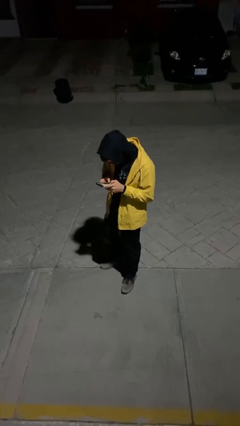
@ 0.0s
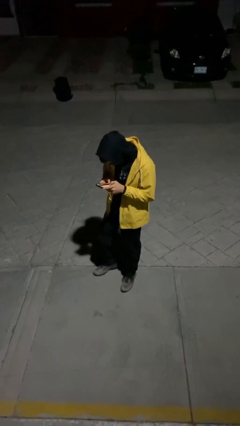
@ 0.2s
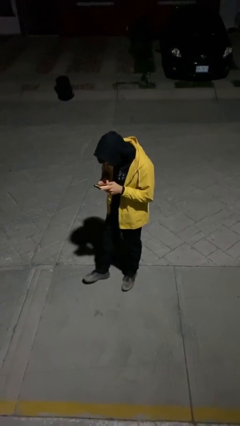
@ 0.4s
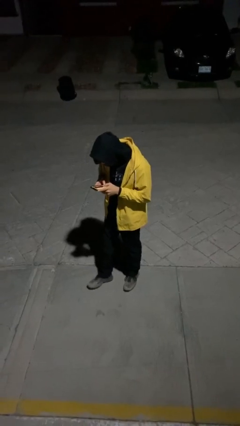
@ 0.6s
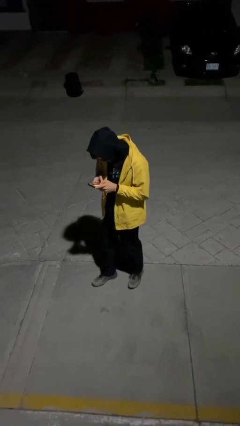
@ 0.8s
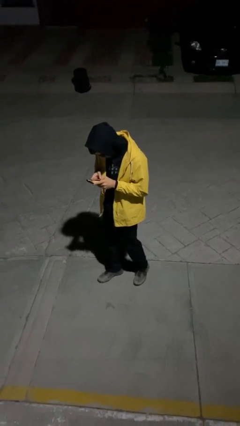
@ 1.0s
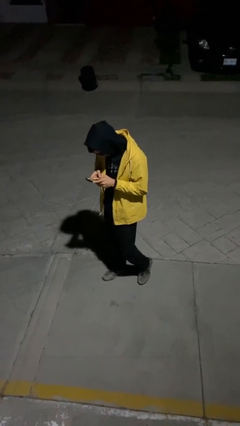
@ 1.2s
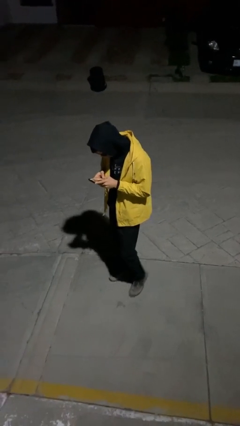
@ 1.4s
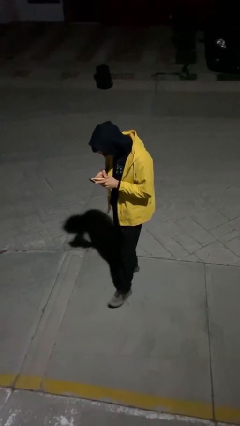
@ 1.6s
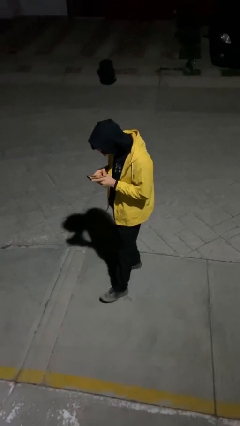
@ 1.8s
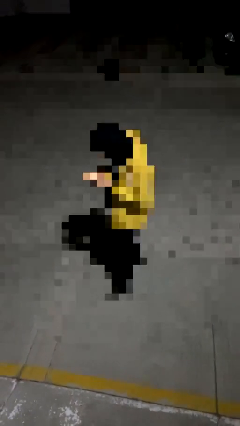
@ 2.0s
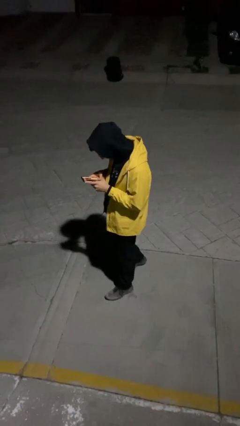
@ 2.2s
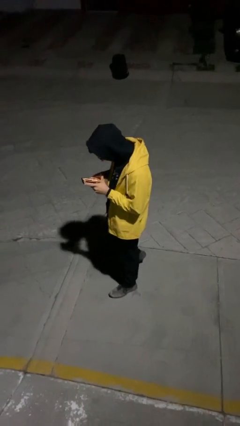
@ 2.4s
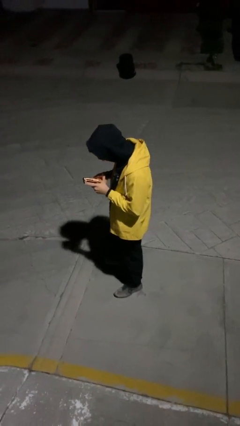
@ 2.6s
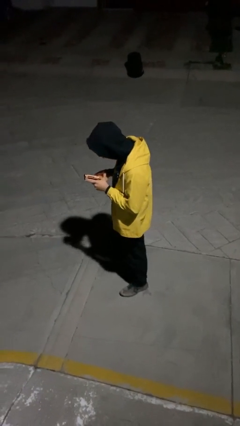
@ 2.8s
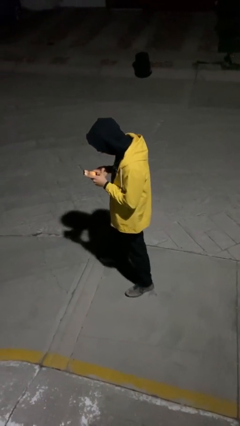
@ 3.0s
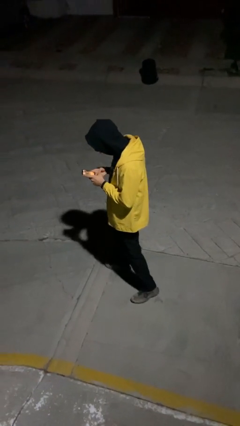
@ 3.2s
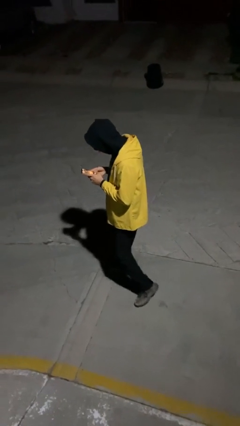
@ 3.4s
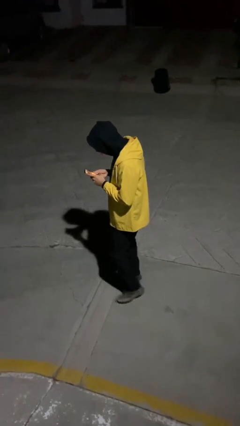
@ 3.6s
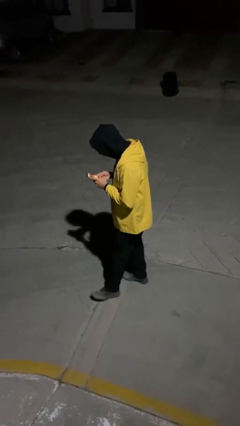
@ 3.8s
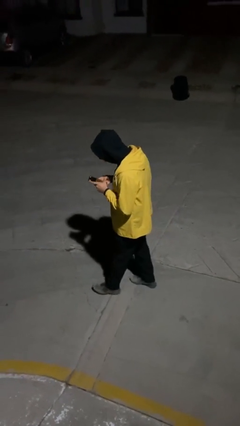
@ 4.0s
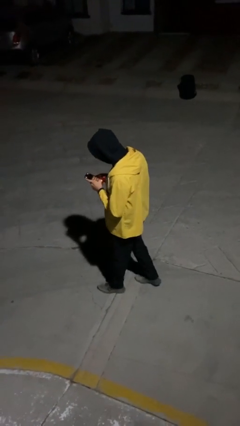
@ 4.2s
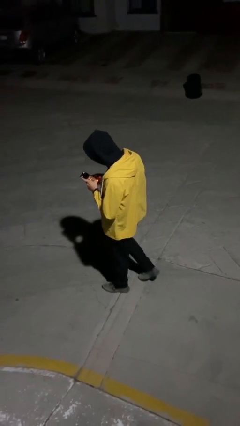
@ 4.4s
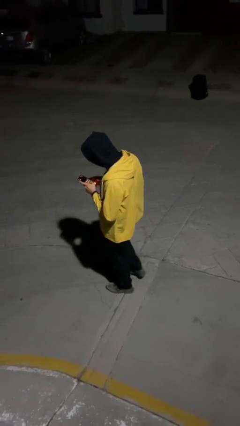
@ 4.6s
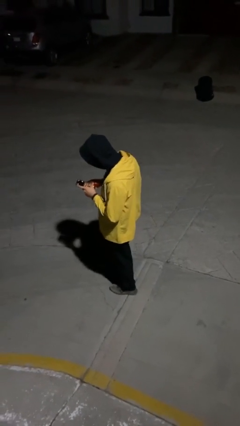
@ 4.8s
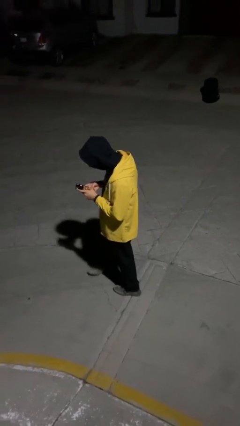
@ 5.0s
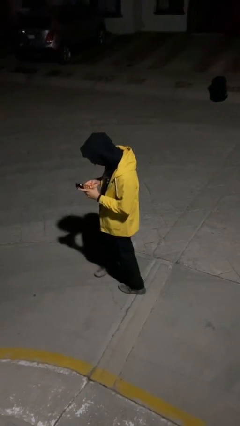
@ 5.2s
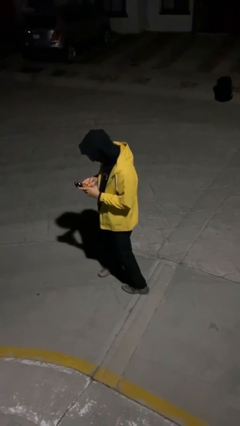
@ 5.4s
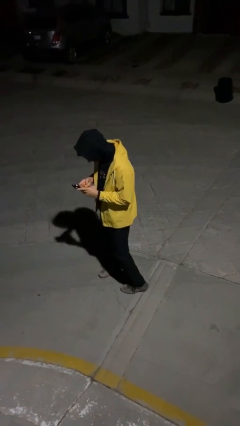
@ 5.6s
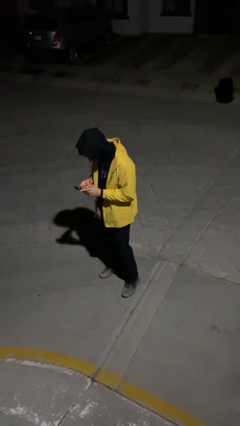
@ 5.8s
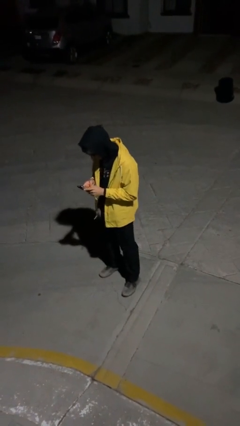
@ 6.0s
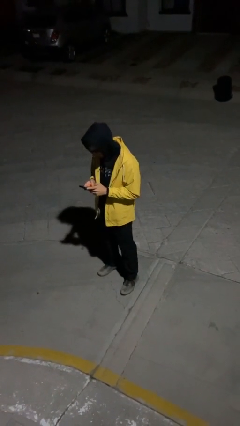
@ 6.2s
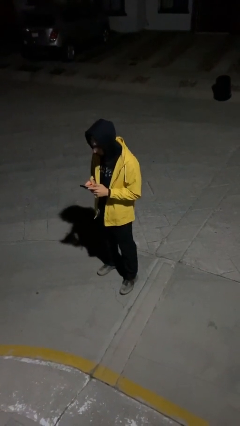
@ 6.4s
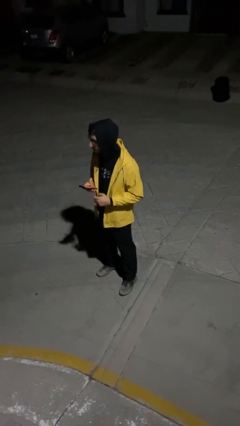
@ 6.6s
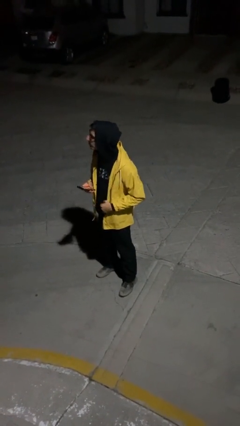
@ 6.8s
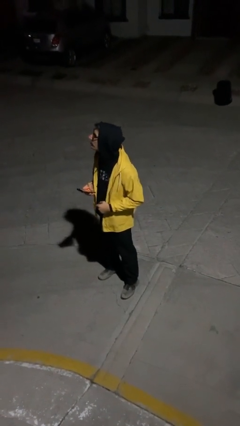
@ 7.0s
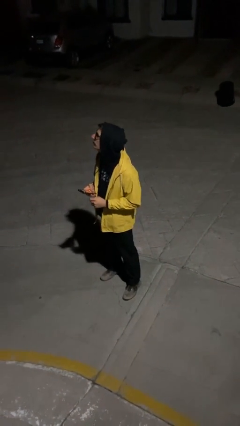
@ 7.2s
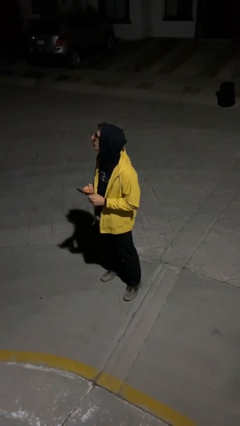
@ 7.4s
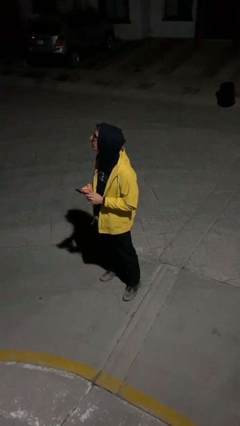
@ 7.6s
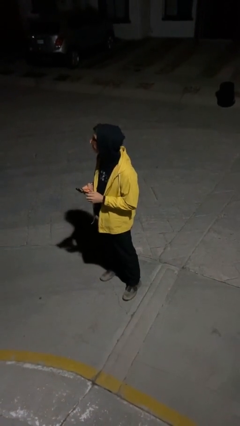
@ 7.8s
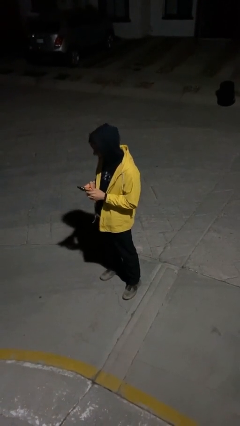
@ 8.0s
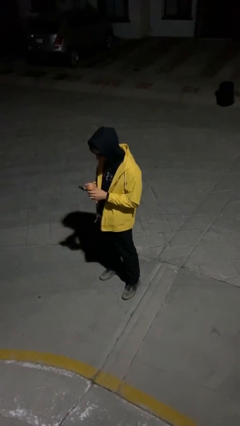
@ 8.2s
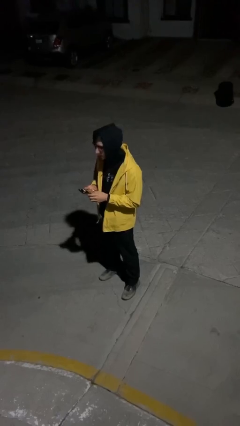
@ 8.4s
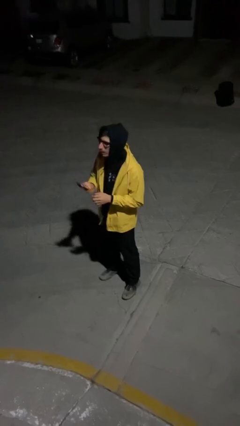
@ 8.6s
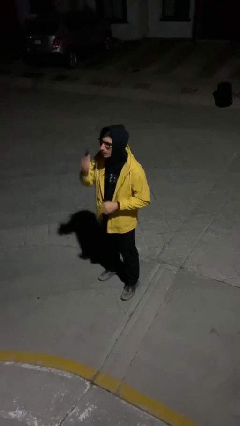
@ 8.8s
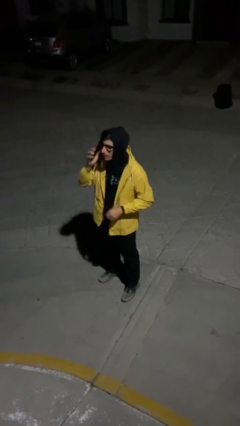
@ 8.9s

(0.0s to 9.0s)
person texts on phone

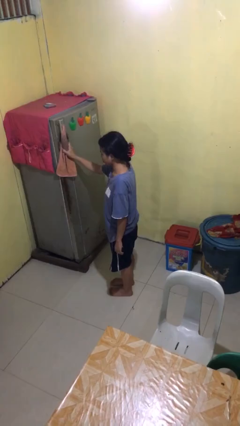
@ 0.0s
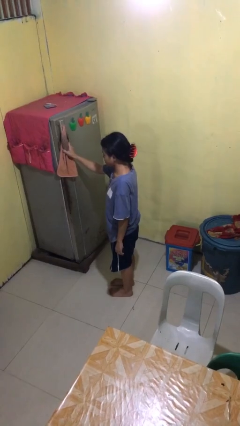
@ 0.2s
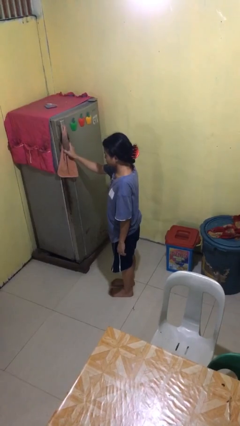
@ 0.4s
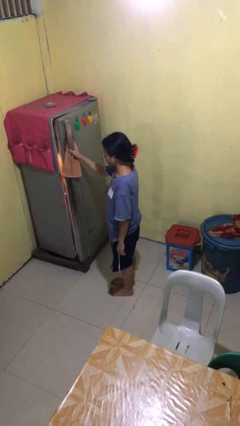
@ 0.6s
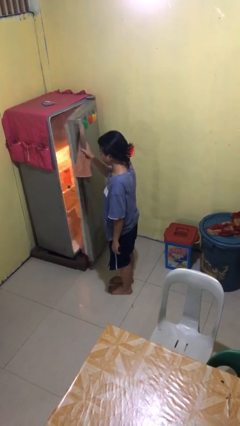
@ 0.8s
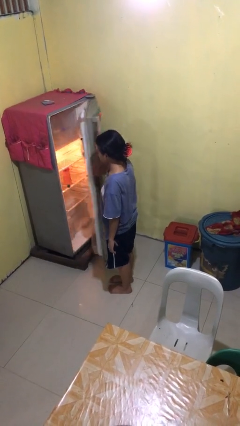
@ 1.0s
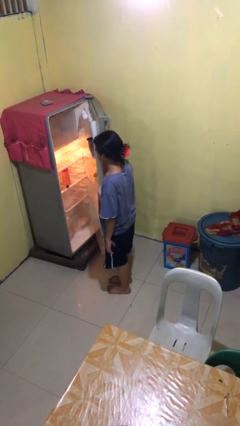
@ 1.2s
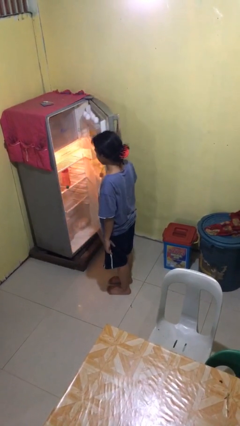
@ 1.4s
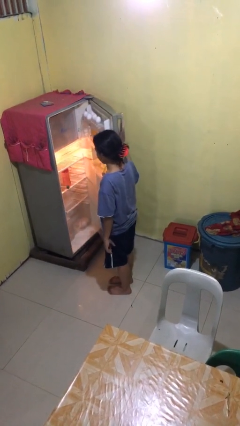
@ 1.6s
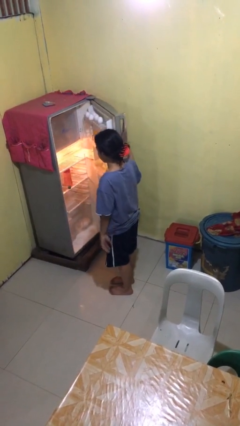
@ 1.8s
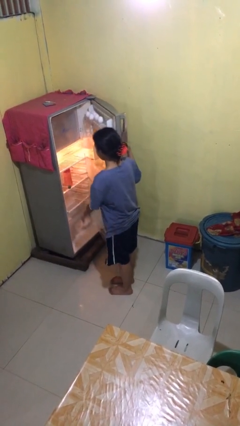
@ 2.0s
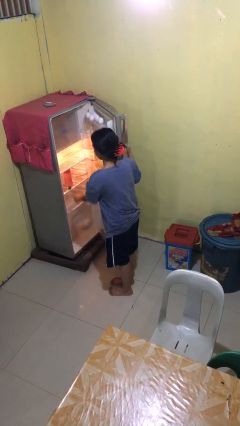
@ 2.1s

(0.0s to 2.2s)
person opens refrigerator

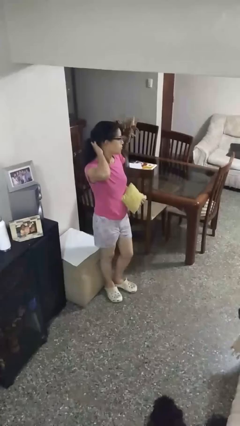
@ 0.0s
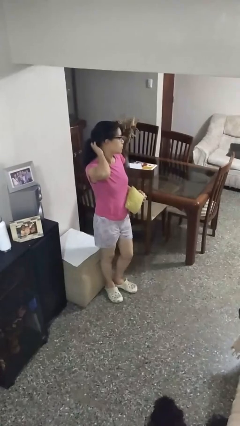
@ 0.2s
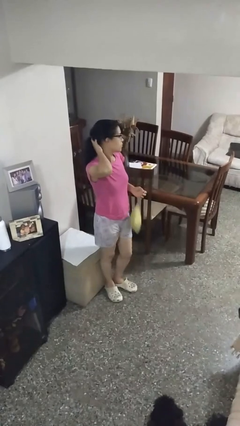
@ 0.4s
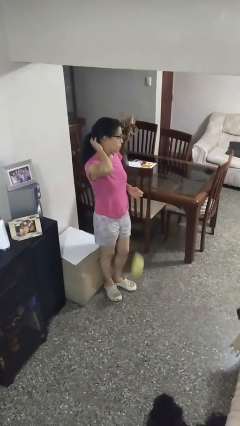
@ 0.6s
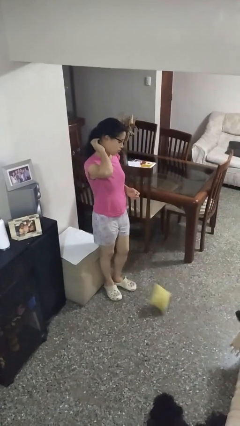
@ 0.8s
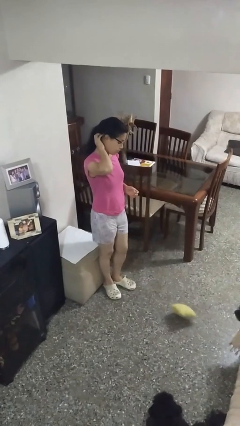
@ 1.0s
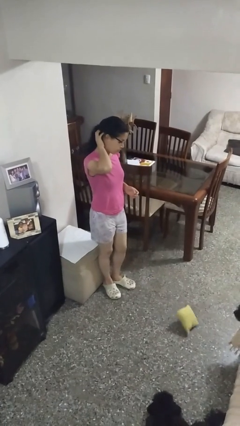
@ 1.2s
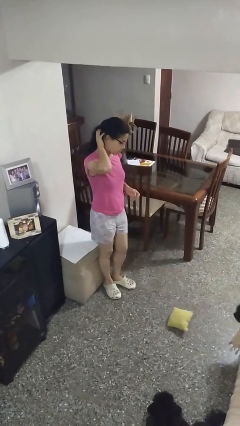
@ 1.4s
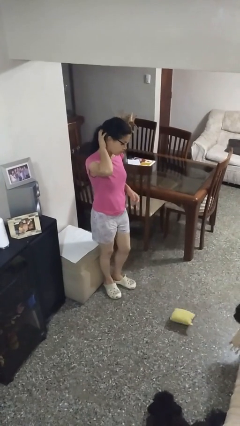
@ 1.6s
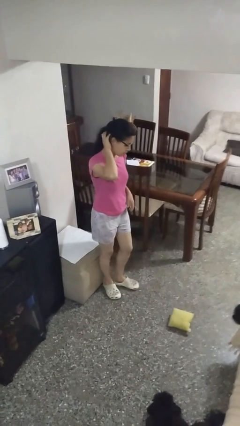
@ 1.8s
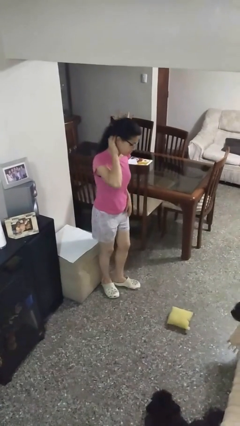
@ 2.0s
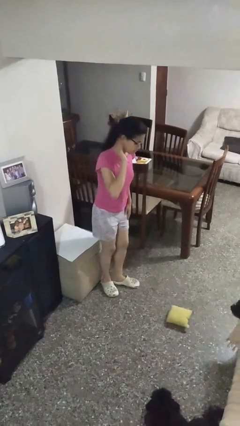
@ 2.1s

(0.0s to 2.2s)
person drops object

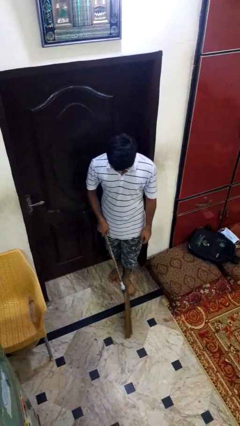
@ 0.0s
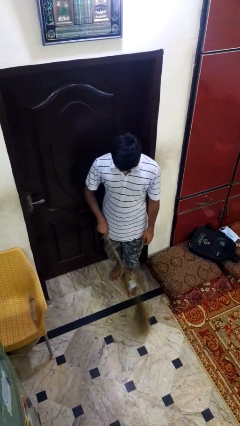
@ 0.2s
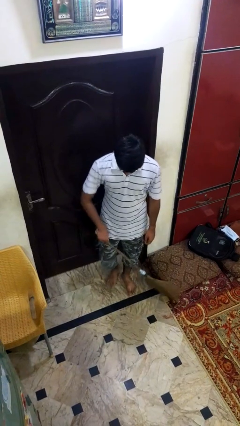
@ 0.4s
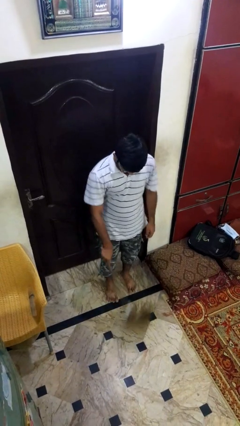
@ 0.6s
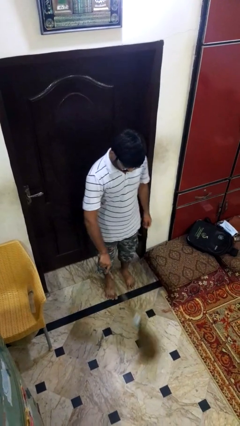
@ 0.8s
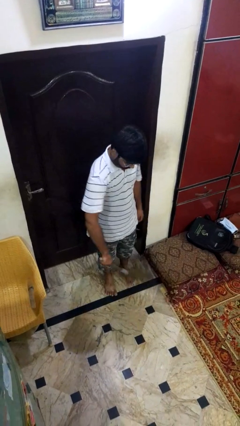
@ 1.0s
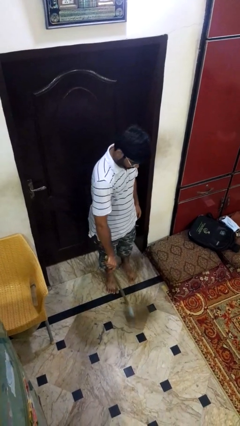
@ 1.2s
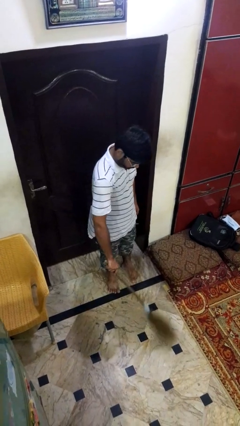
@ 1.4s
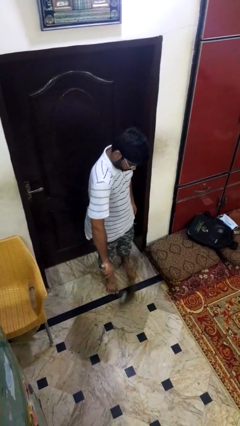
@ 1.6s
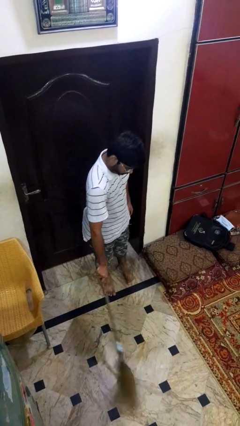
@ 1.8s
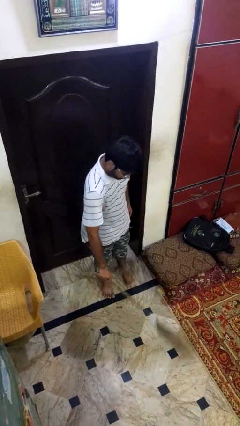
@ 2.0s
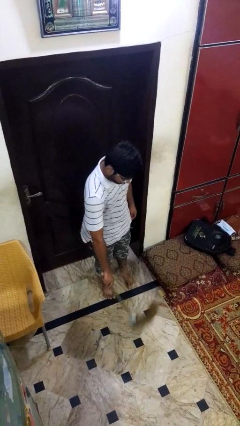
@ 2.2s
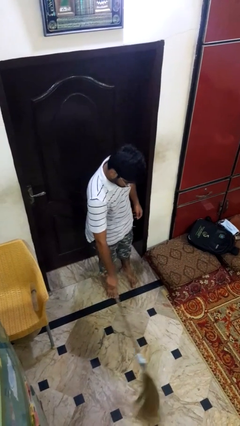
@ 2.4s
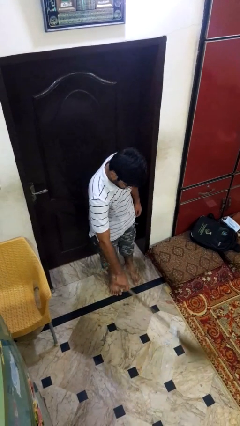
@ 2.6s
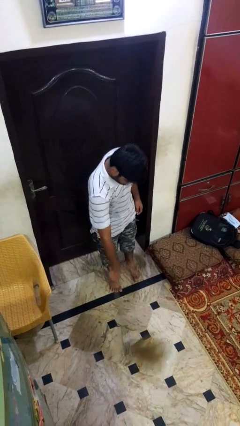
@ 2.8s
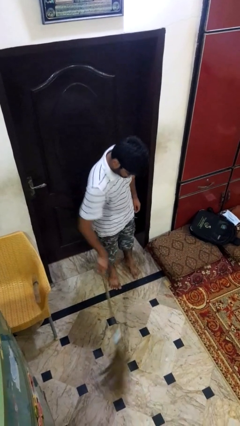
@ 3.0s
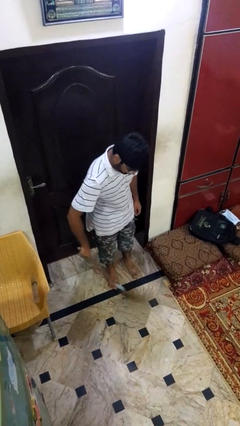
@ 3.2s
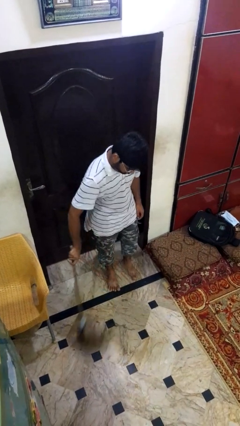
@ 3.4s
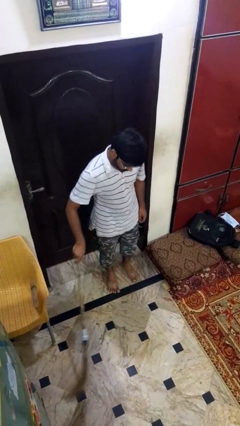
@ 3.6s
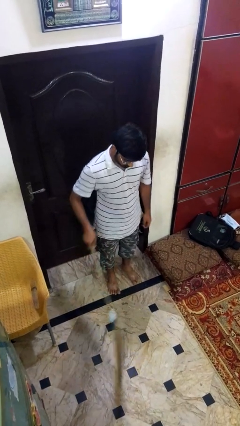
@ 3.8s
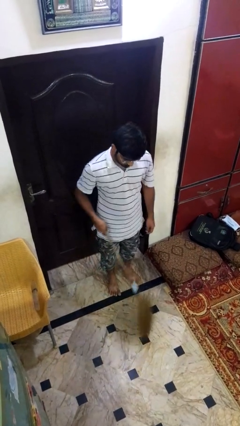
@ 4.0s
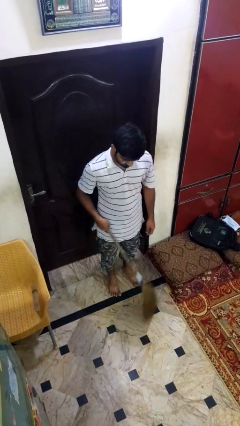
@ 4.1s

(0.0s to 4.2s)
person sweeps floor
